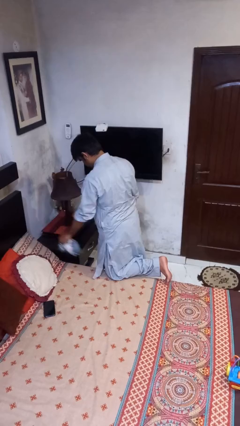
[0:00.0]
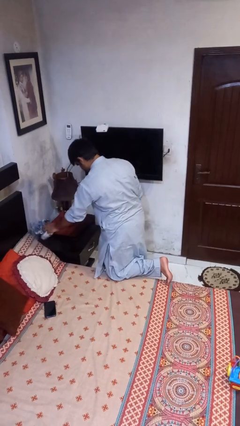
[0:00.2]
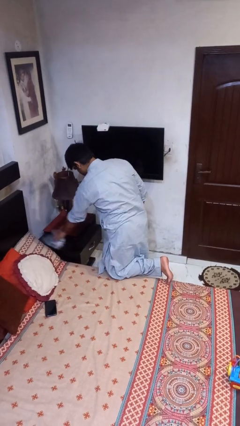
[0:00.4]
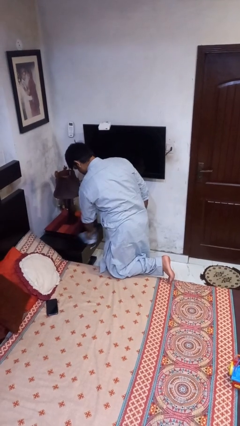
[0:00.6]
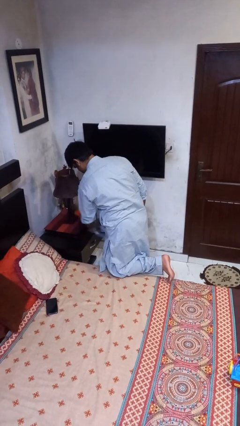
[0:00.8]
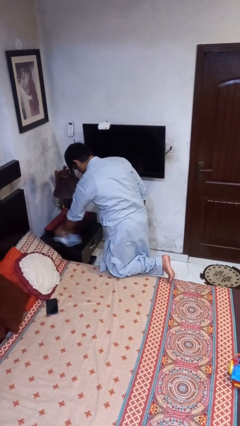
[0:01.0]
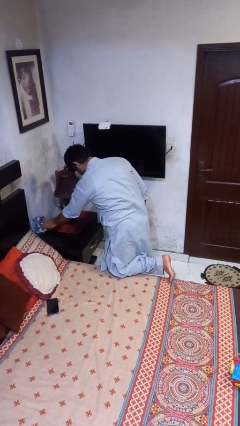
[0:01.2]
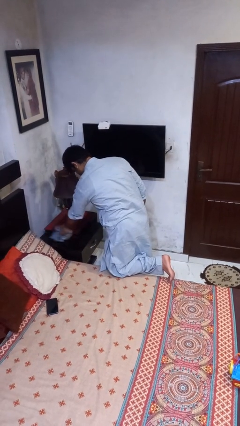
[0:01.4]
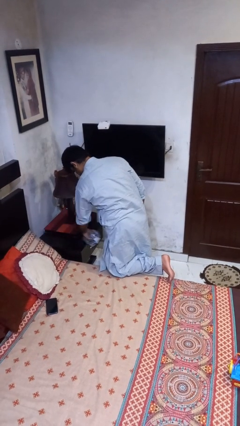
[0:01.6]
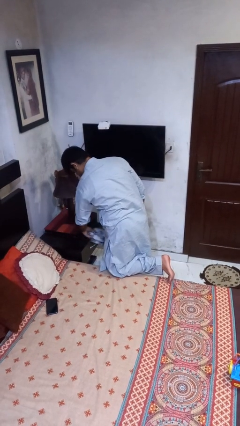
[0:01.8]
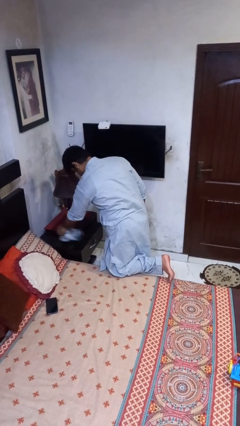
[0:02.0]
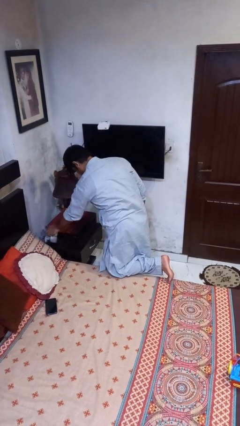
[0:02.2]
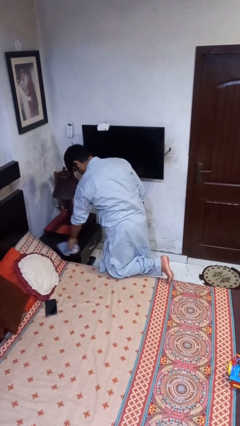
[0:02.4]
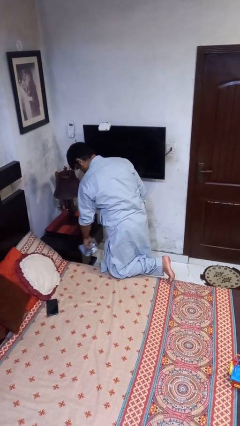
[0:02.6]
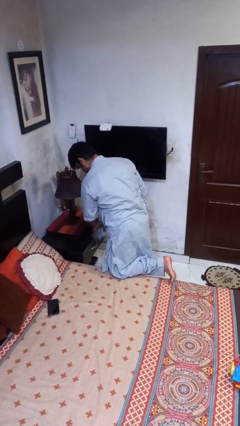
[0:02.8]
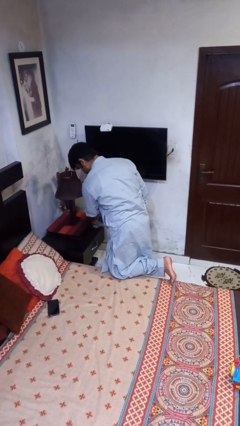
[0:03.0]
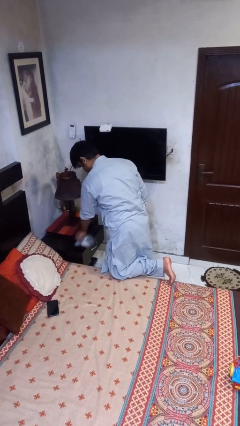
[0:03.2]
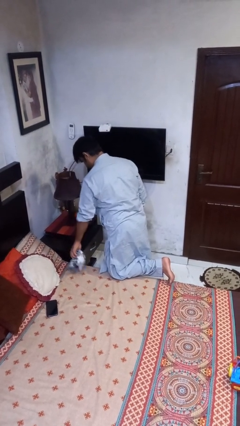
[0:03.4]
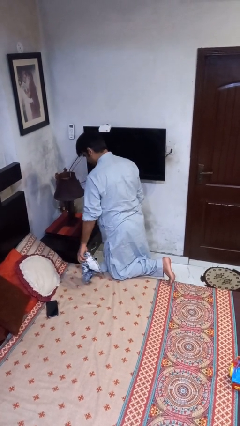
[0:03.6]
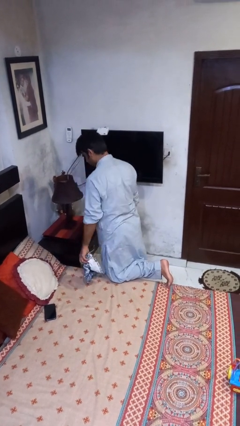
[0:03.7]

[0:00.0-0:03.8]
person cleans table with rag

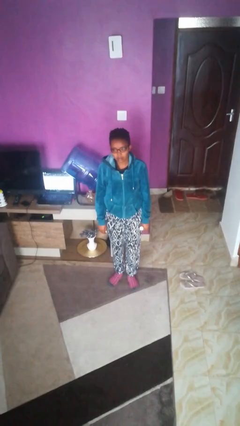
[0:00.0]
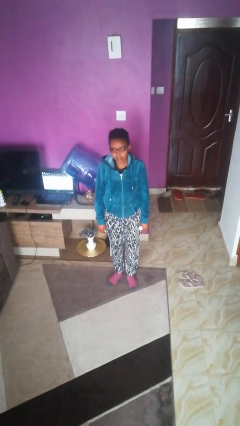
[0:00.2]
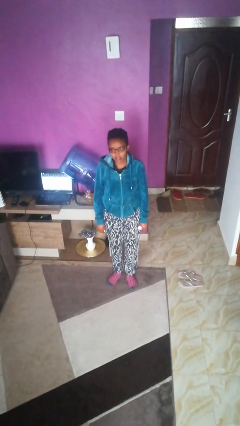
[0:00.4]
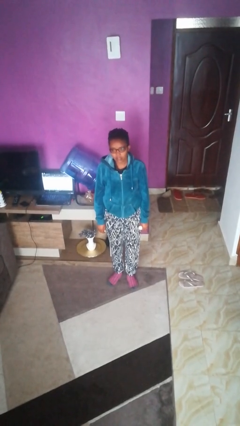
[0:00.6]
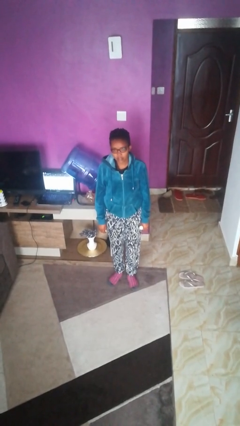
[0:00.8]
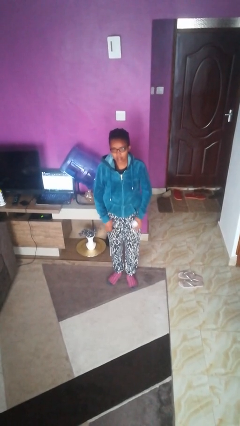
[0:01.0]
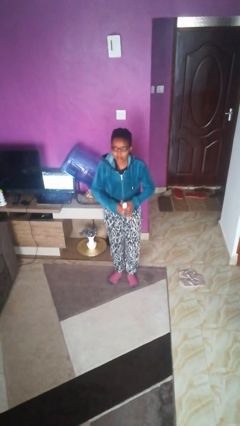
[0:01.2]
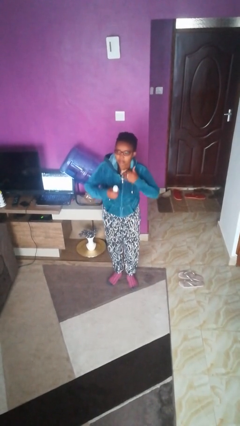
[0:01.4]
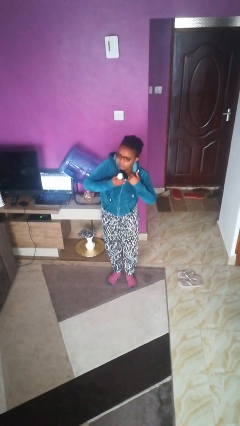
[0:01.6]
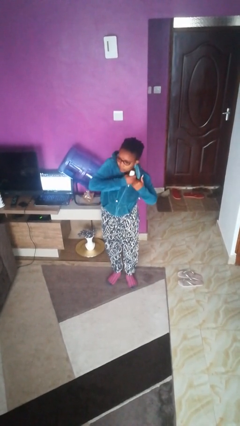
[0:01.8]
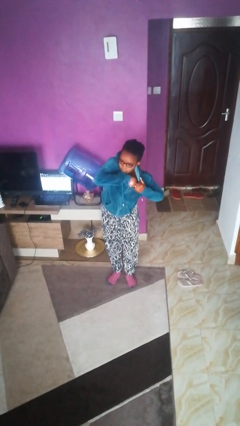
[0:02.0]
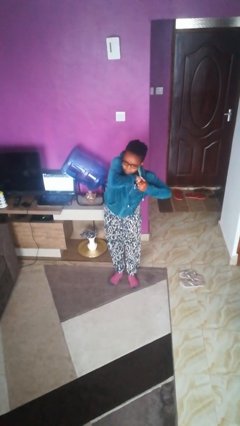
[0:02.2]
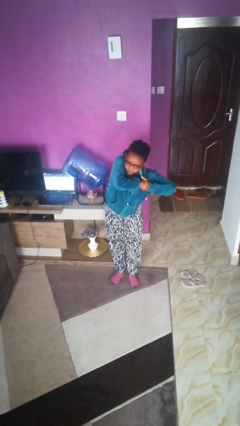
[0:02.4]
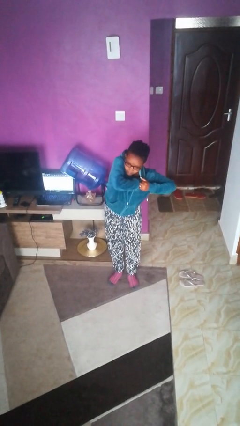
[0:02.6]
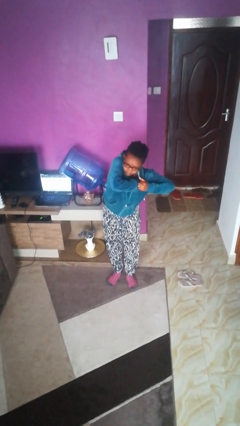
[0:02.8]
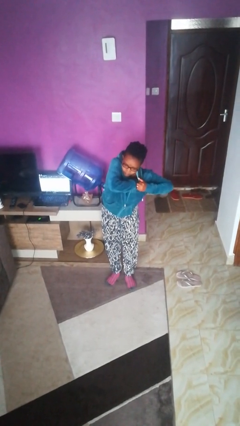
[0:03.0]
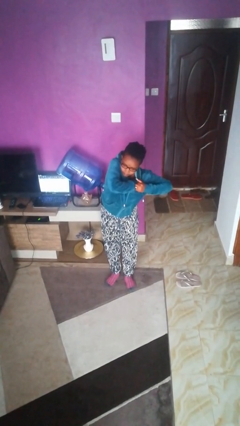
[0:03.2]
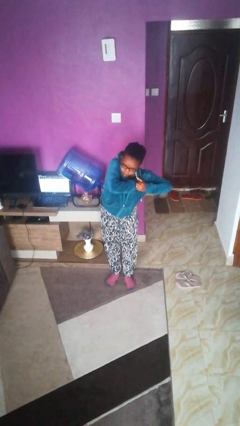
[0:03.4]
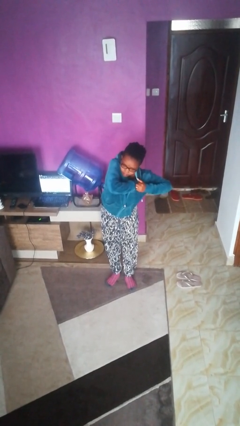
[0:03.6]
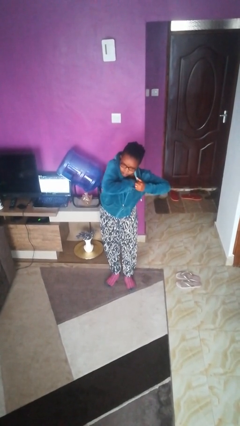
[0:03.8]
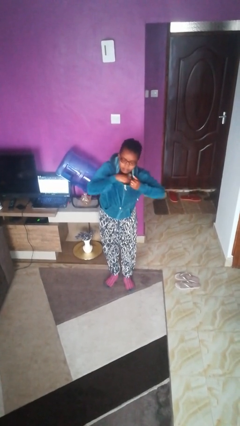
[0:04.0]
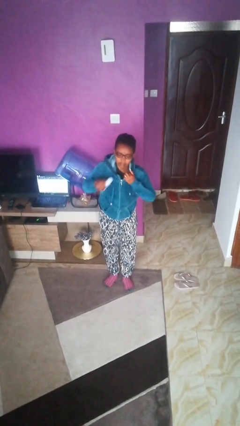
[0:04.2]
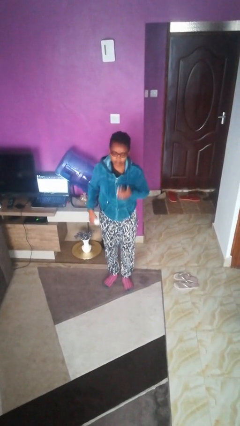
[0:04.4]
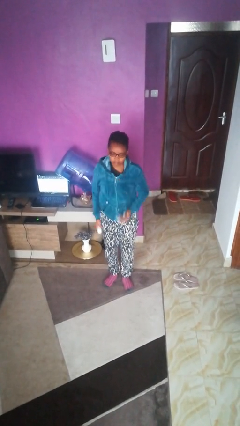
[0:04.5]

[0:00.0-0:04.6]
person applies deodorant

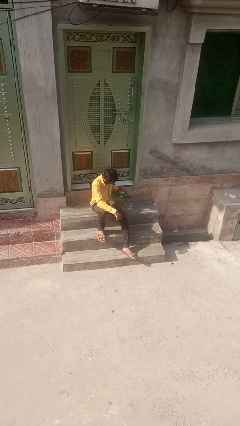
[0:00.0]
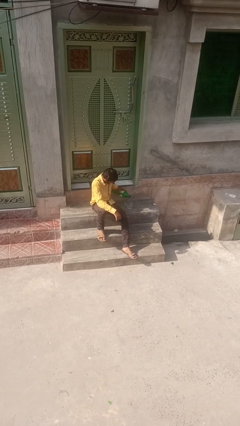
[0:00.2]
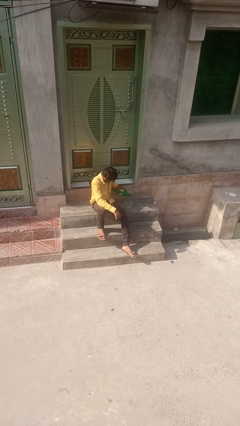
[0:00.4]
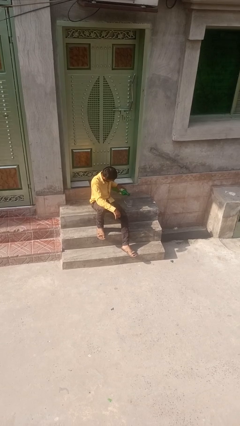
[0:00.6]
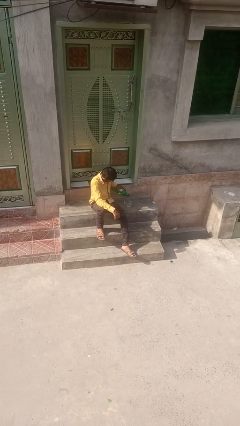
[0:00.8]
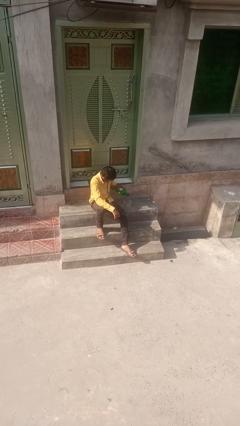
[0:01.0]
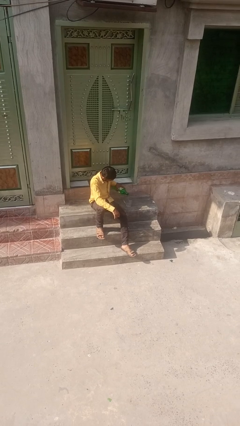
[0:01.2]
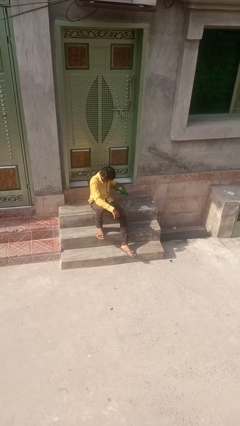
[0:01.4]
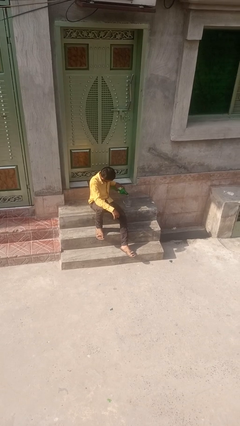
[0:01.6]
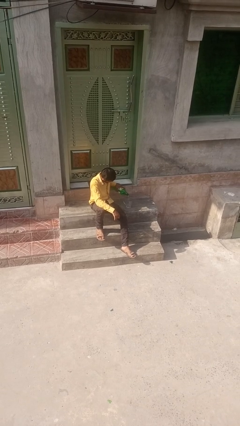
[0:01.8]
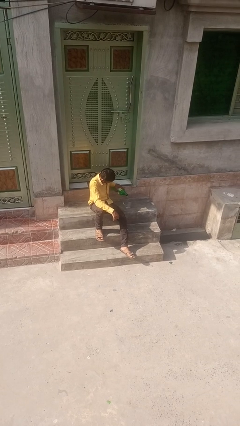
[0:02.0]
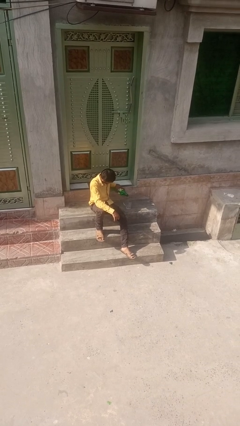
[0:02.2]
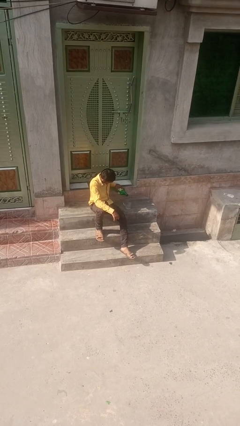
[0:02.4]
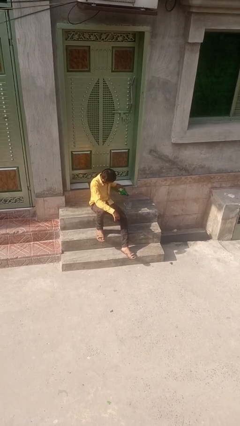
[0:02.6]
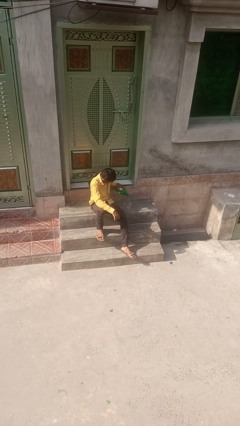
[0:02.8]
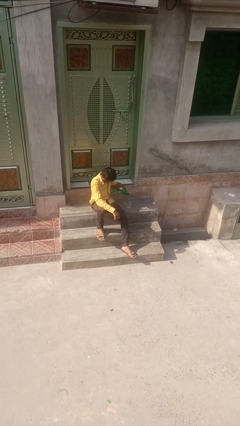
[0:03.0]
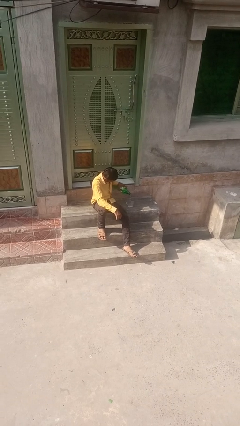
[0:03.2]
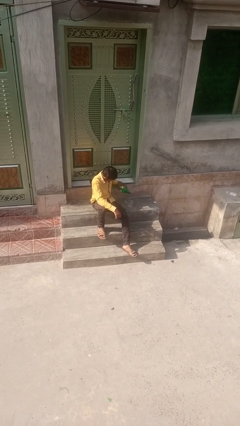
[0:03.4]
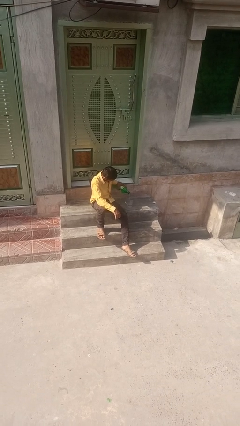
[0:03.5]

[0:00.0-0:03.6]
person pours liquid into cup

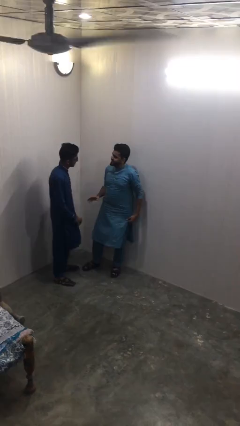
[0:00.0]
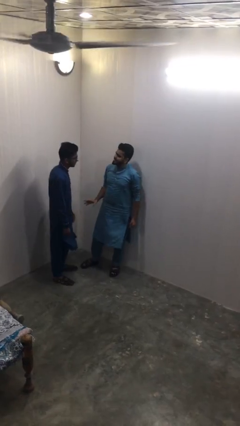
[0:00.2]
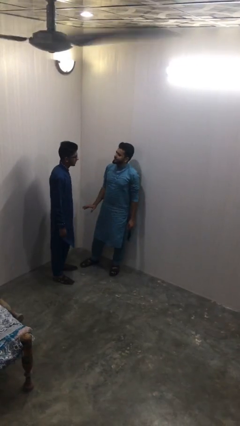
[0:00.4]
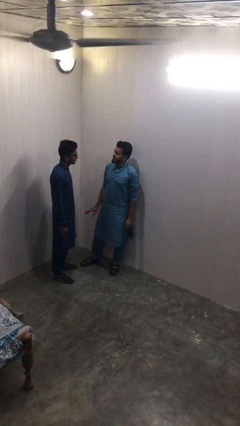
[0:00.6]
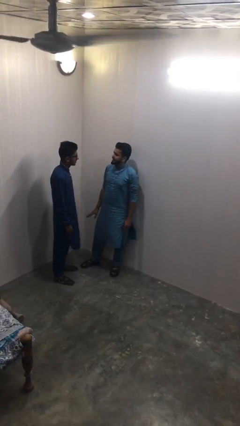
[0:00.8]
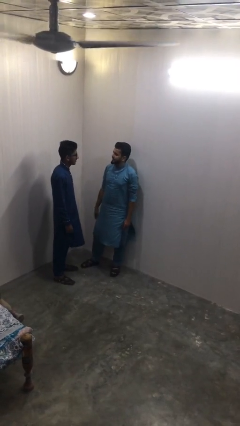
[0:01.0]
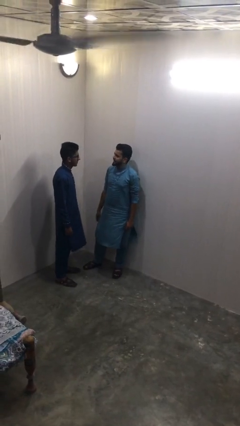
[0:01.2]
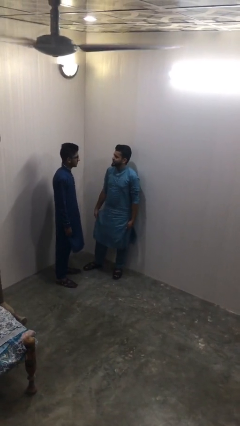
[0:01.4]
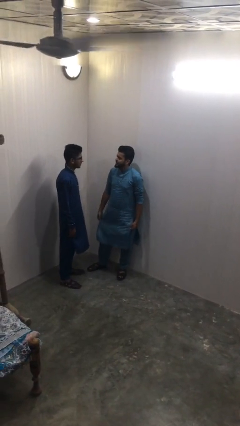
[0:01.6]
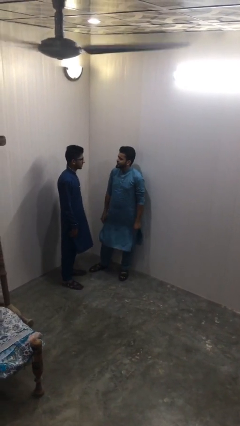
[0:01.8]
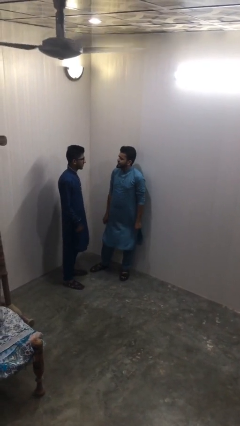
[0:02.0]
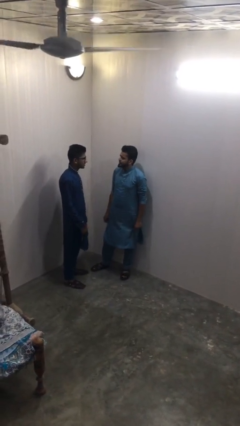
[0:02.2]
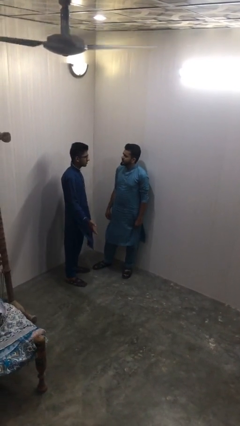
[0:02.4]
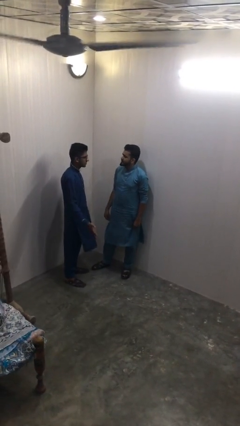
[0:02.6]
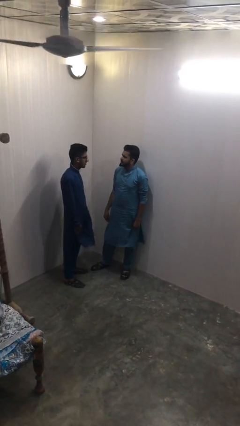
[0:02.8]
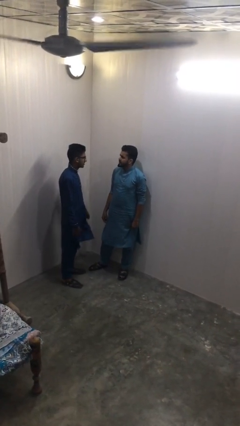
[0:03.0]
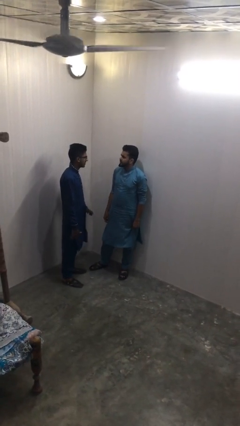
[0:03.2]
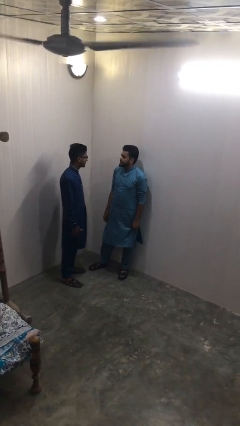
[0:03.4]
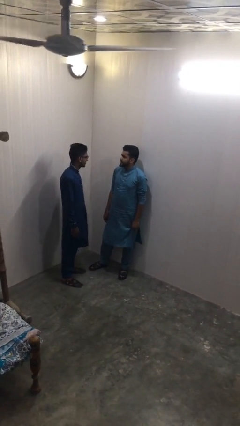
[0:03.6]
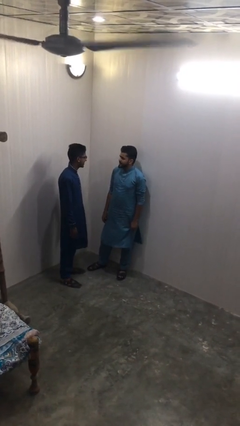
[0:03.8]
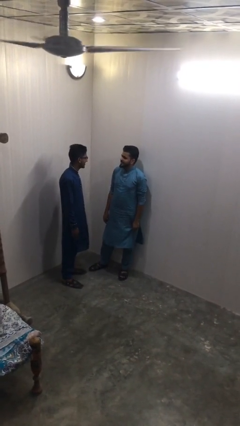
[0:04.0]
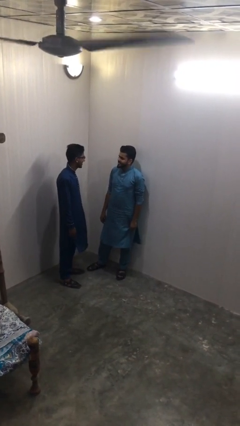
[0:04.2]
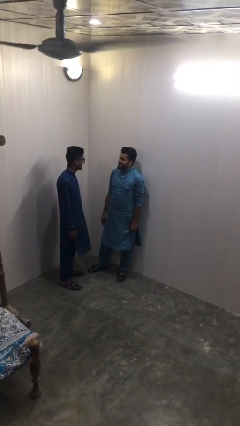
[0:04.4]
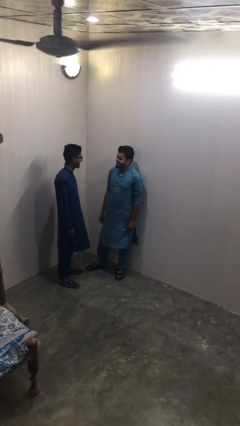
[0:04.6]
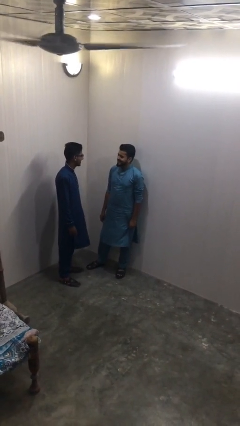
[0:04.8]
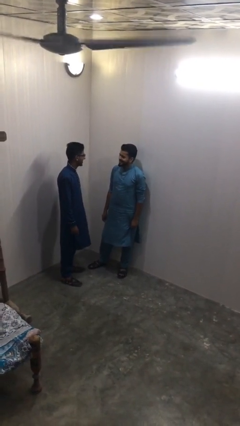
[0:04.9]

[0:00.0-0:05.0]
person talks to person

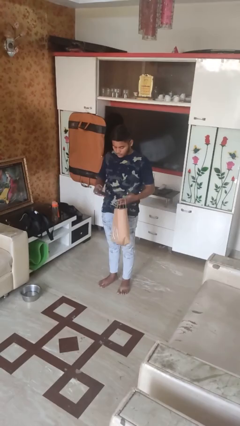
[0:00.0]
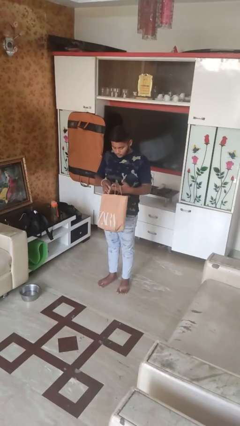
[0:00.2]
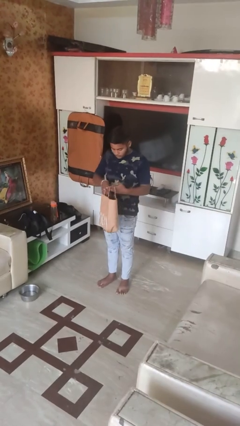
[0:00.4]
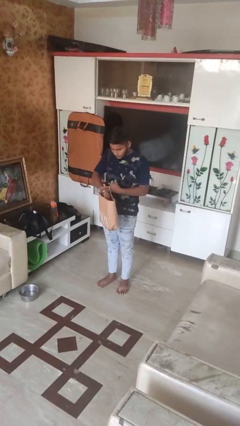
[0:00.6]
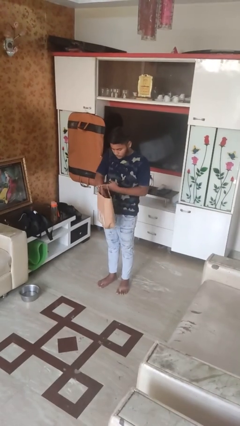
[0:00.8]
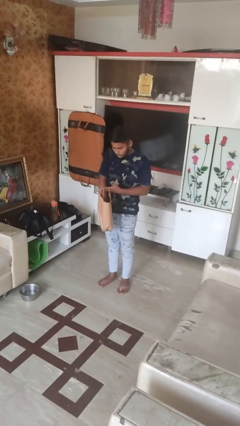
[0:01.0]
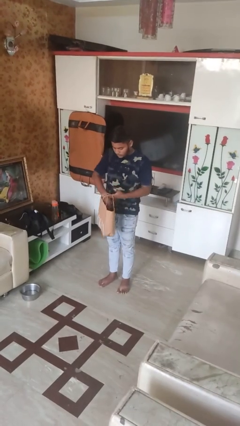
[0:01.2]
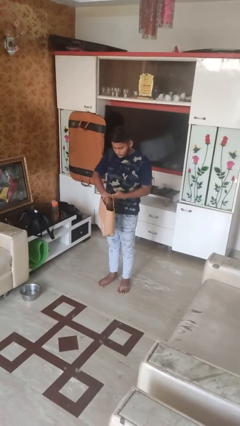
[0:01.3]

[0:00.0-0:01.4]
person puts object into bag
